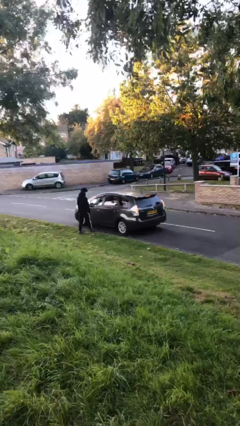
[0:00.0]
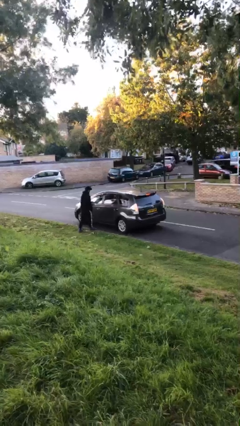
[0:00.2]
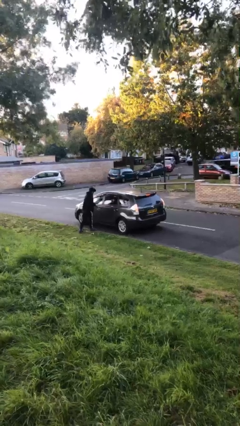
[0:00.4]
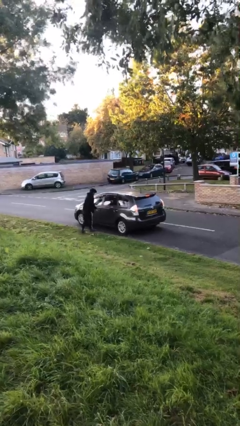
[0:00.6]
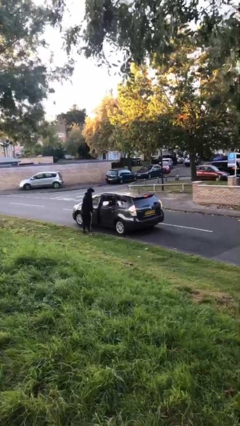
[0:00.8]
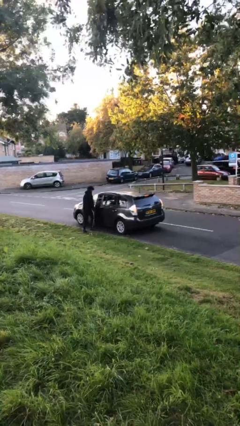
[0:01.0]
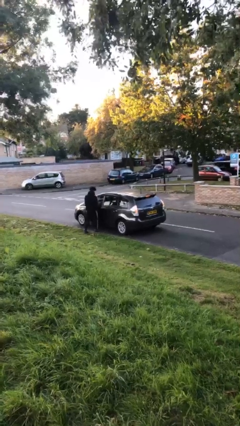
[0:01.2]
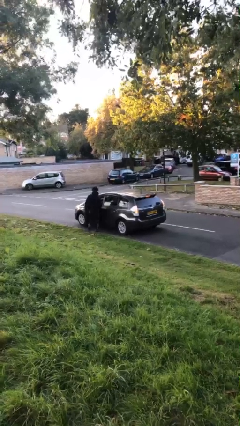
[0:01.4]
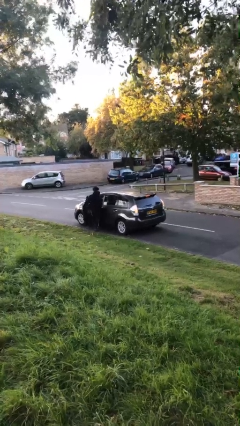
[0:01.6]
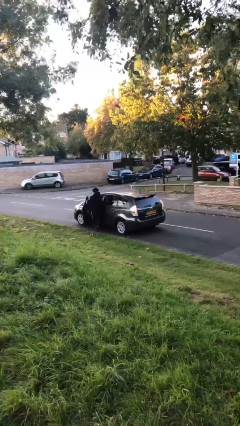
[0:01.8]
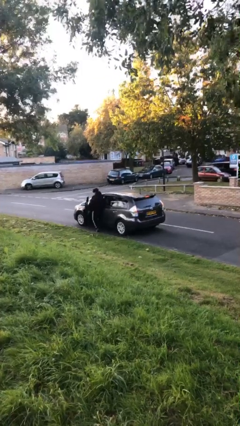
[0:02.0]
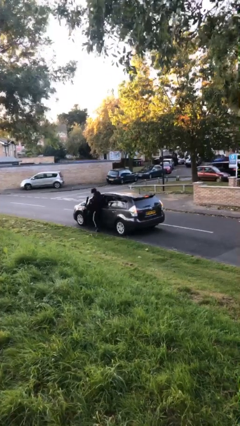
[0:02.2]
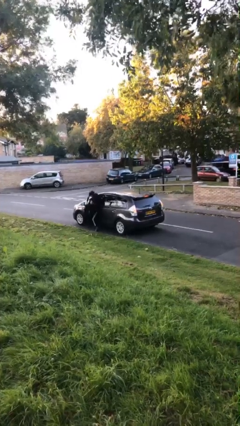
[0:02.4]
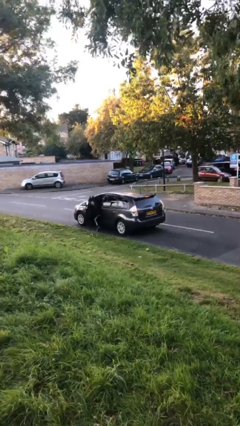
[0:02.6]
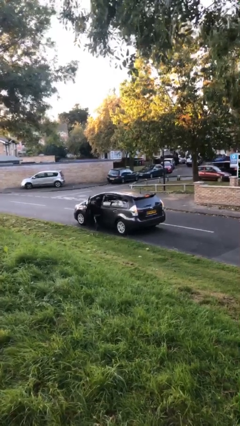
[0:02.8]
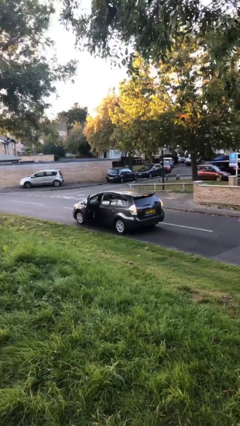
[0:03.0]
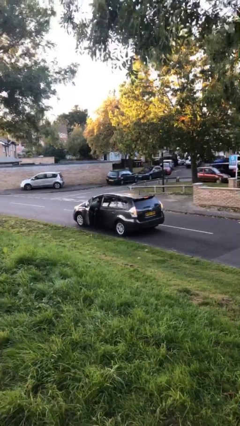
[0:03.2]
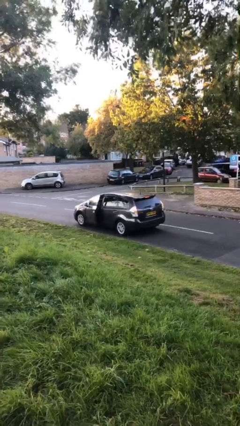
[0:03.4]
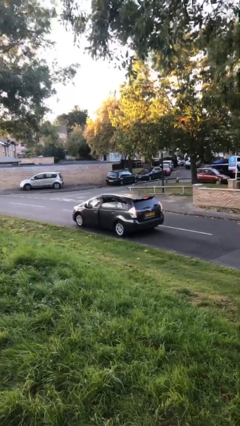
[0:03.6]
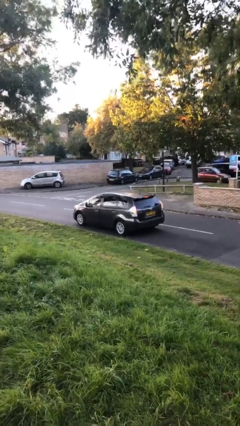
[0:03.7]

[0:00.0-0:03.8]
car picks up person

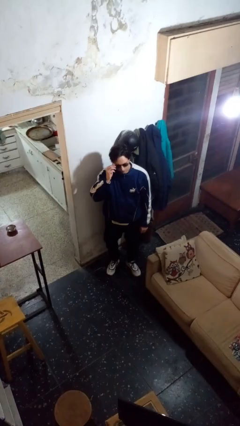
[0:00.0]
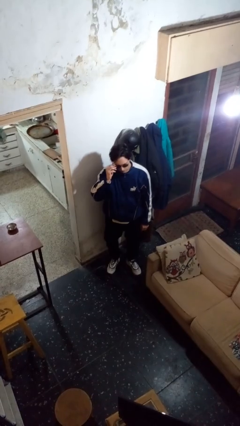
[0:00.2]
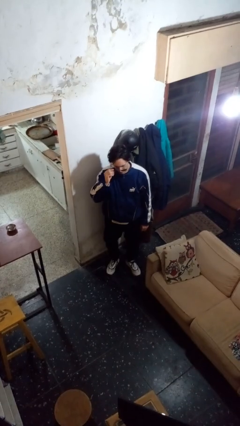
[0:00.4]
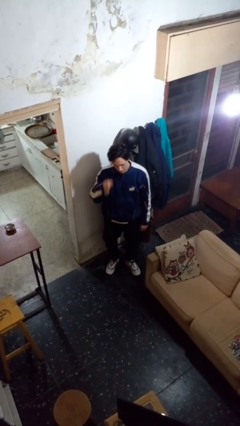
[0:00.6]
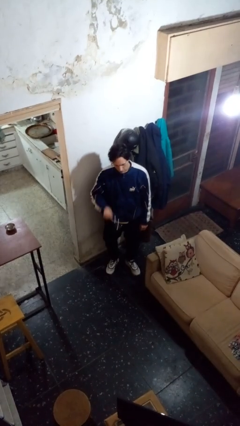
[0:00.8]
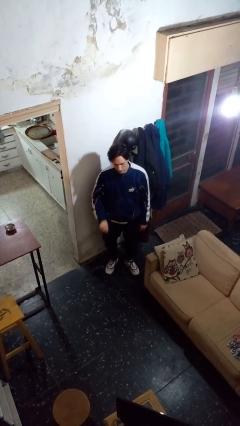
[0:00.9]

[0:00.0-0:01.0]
person takes off sunglasses

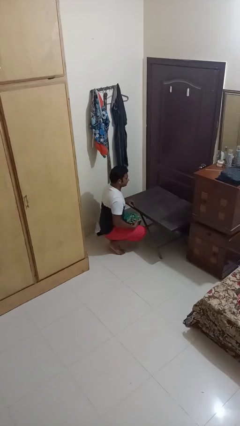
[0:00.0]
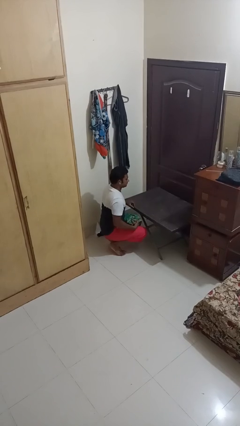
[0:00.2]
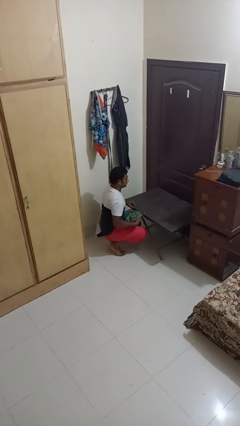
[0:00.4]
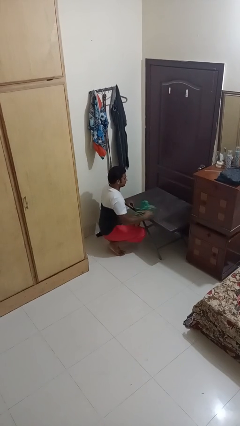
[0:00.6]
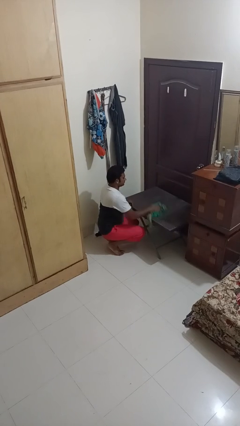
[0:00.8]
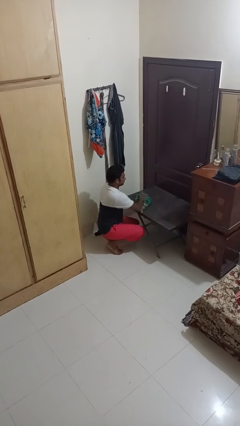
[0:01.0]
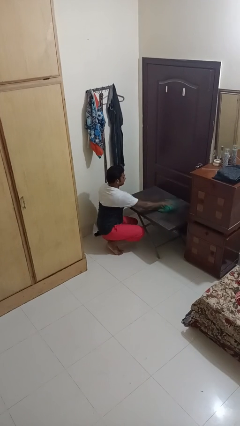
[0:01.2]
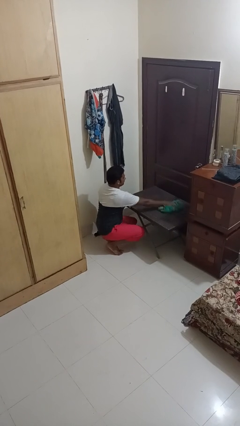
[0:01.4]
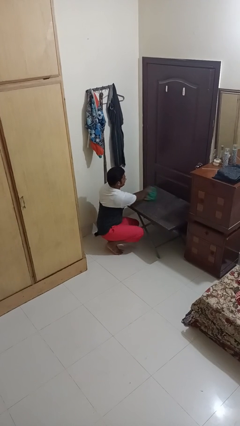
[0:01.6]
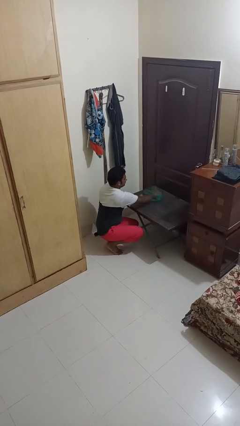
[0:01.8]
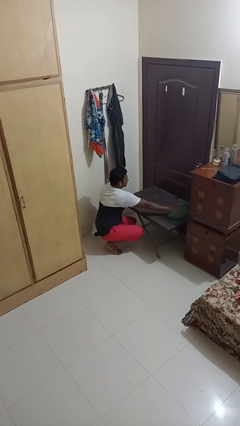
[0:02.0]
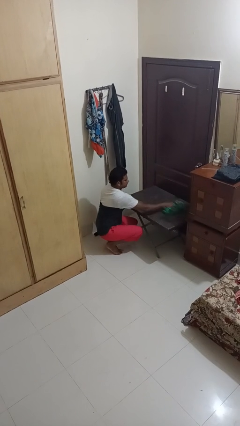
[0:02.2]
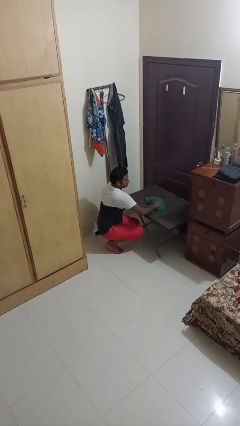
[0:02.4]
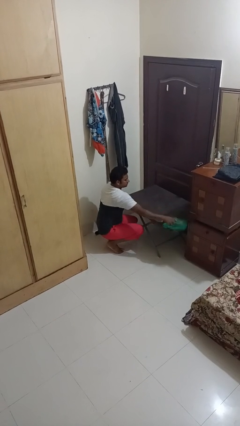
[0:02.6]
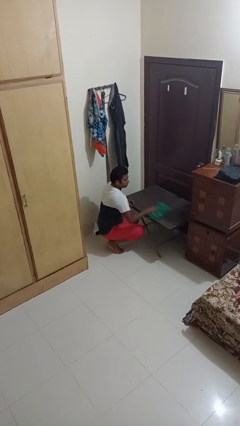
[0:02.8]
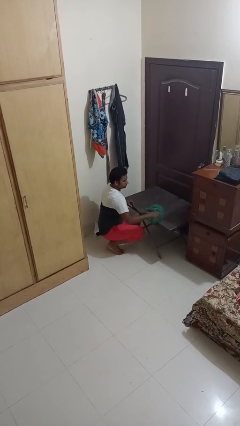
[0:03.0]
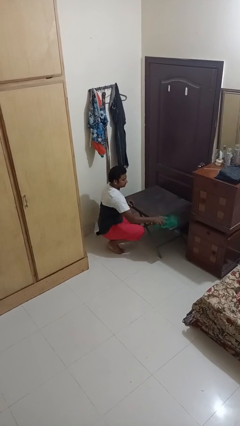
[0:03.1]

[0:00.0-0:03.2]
person cleans table with rag

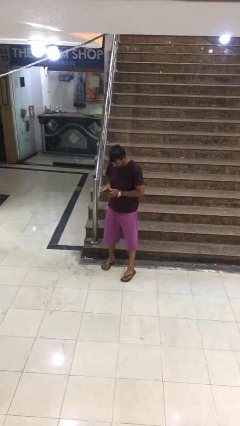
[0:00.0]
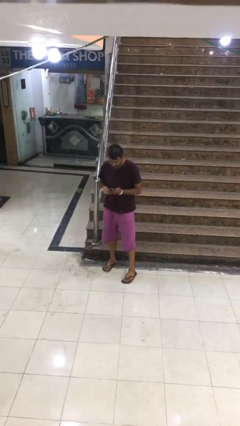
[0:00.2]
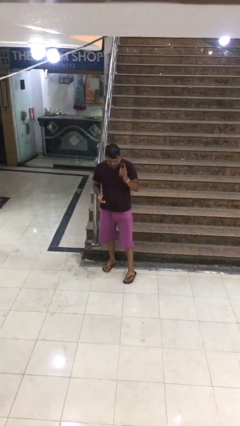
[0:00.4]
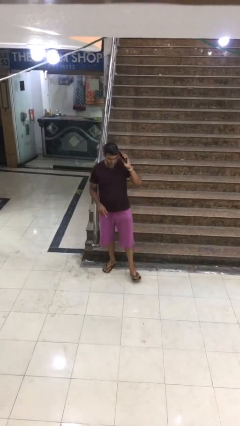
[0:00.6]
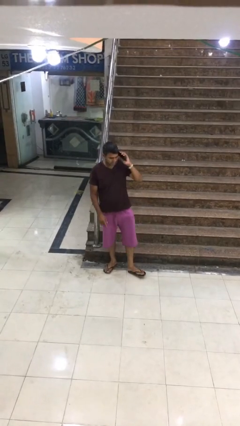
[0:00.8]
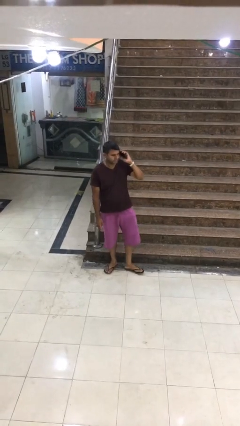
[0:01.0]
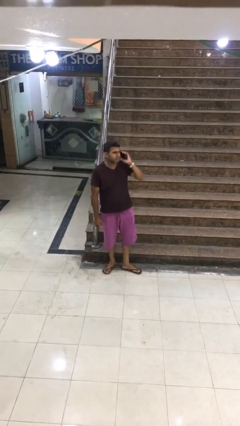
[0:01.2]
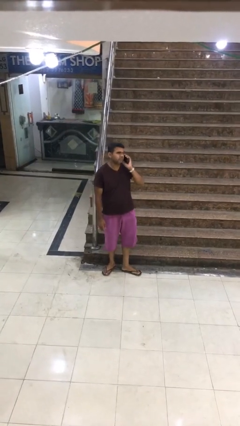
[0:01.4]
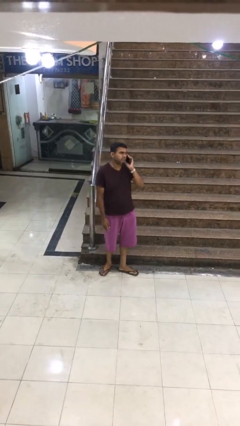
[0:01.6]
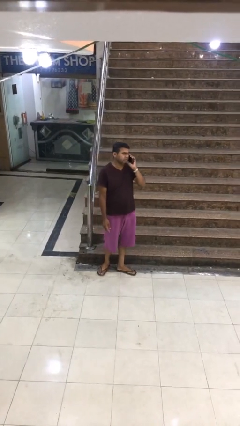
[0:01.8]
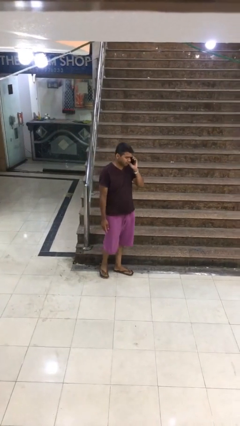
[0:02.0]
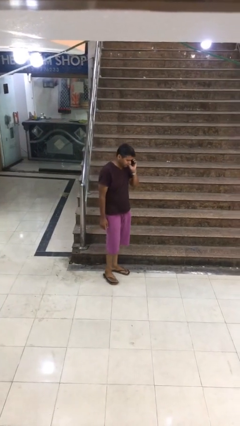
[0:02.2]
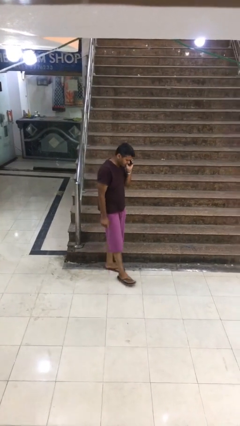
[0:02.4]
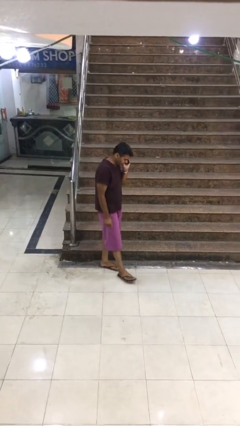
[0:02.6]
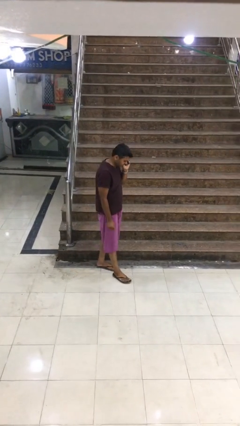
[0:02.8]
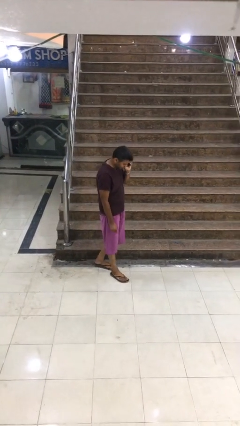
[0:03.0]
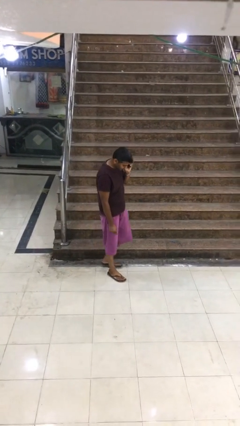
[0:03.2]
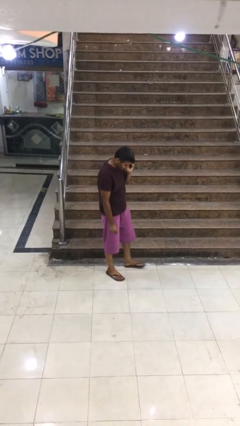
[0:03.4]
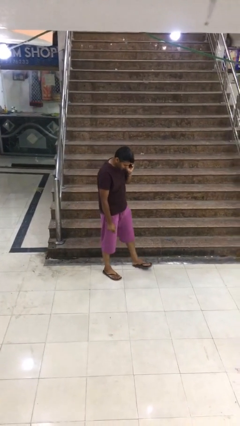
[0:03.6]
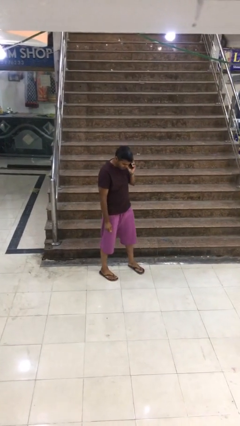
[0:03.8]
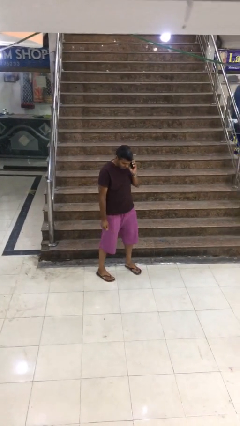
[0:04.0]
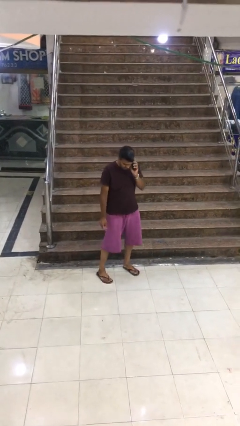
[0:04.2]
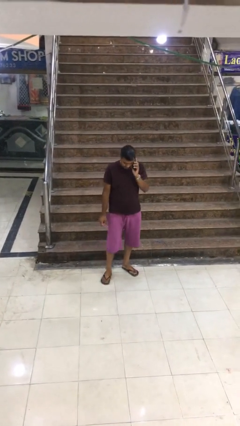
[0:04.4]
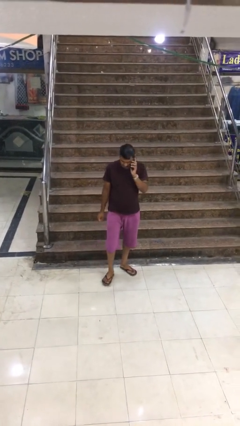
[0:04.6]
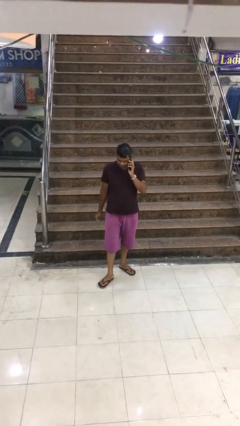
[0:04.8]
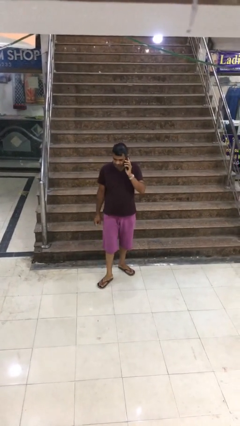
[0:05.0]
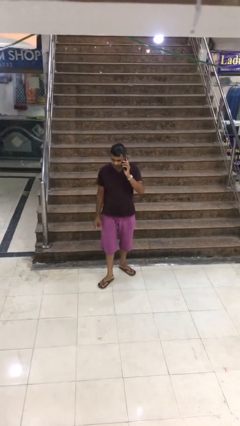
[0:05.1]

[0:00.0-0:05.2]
person talks on phone

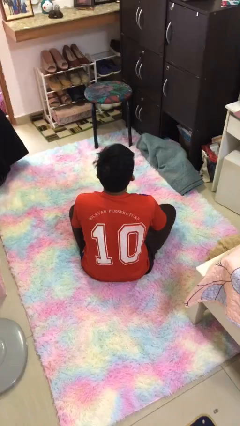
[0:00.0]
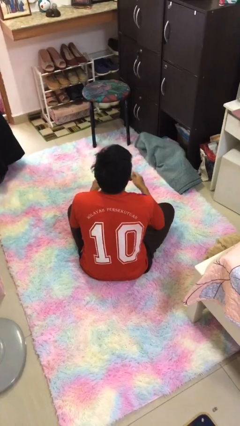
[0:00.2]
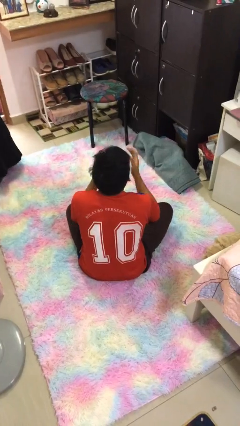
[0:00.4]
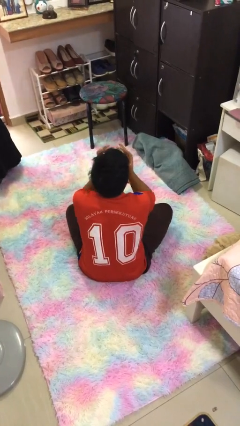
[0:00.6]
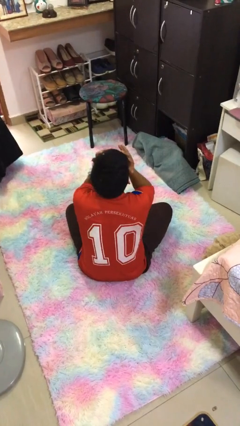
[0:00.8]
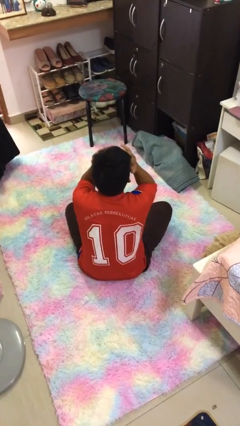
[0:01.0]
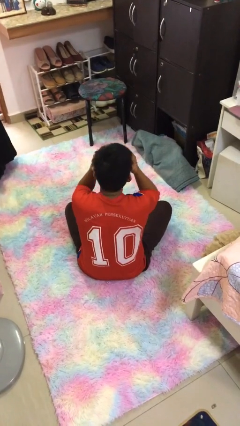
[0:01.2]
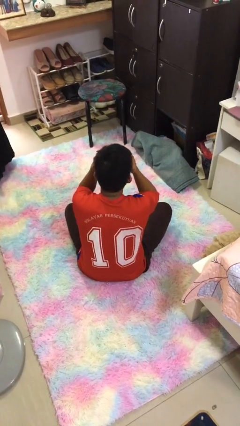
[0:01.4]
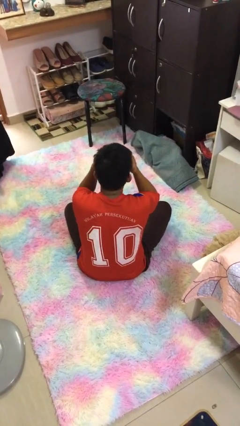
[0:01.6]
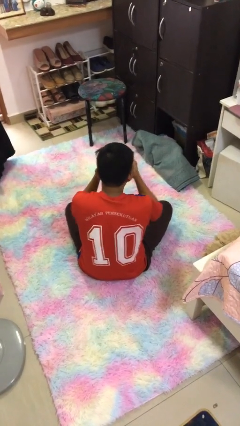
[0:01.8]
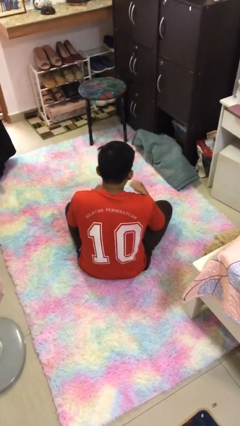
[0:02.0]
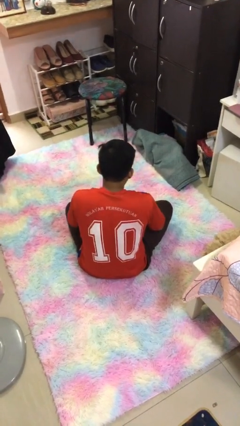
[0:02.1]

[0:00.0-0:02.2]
person covers face with hands

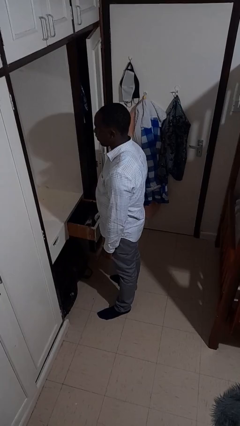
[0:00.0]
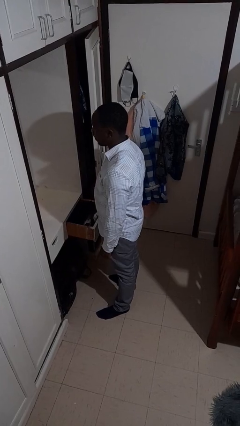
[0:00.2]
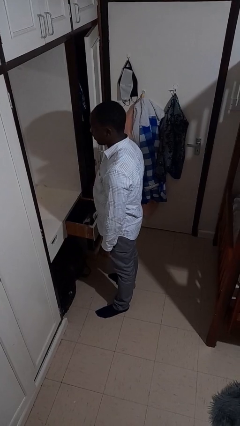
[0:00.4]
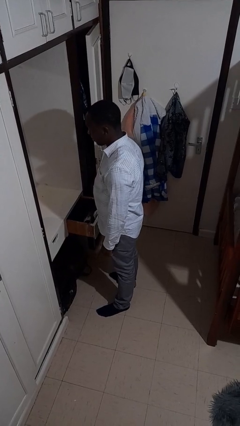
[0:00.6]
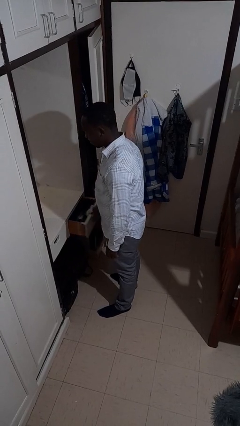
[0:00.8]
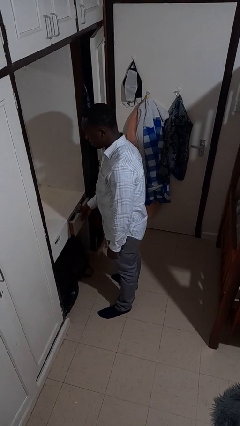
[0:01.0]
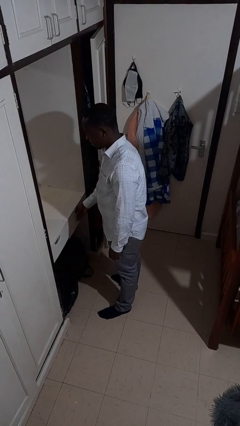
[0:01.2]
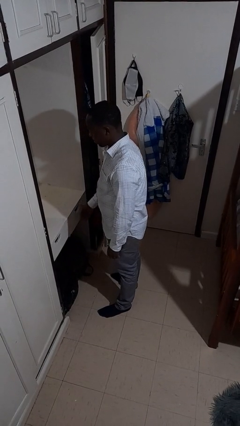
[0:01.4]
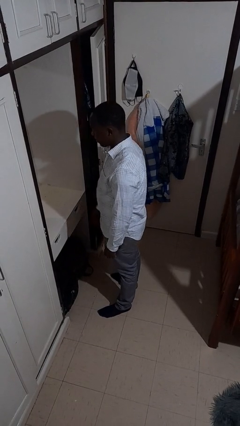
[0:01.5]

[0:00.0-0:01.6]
person closes dresser drawer

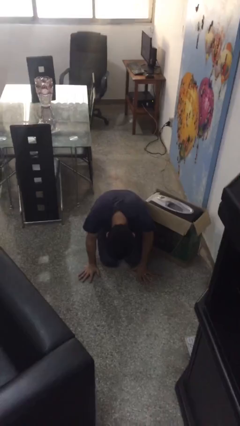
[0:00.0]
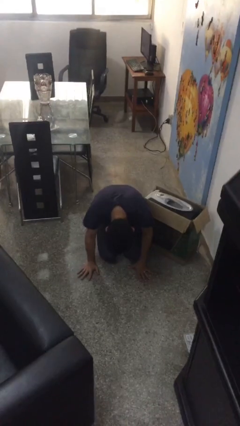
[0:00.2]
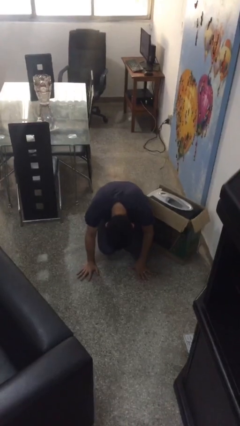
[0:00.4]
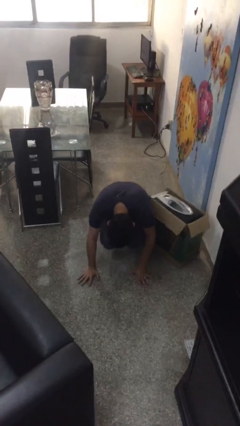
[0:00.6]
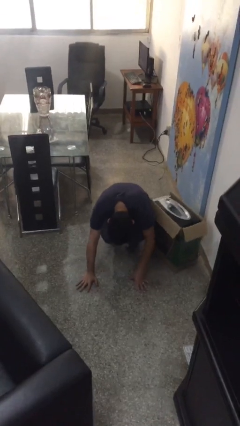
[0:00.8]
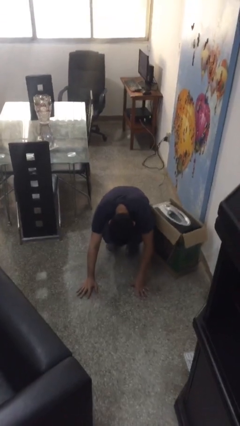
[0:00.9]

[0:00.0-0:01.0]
person lies down on floor
